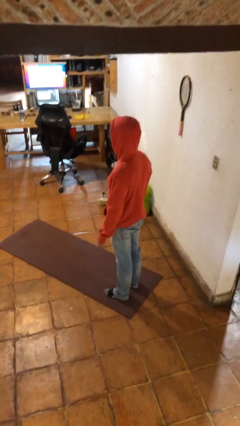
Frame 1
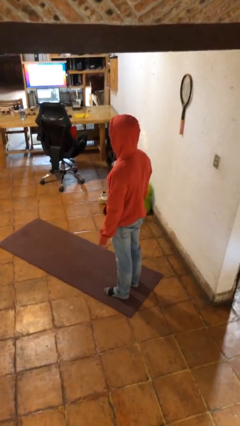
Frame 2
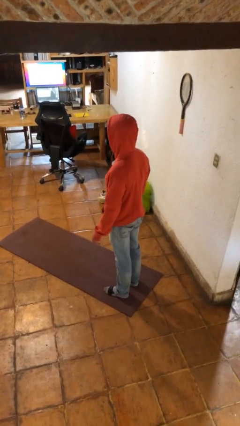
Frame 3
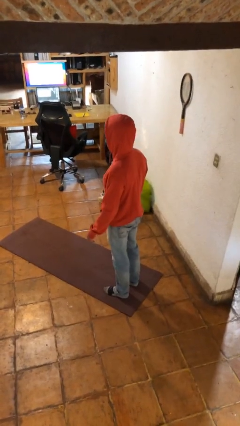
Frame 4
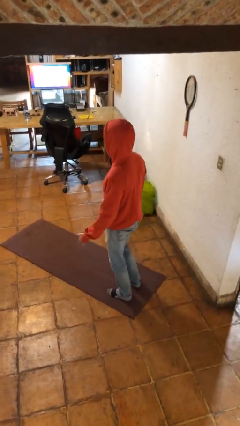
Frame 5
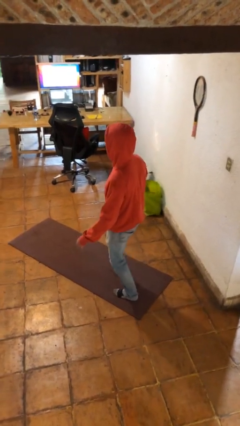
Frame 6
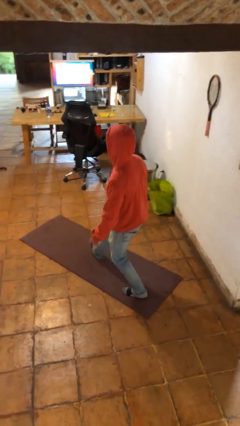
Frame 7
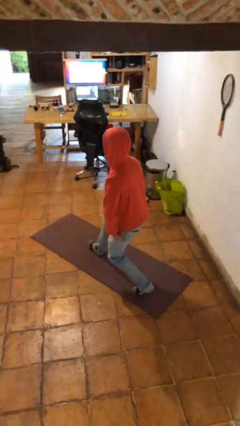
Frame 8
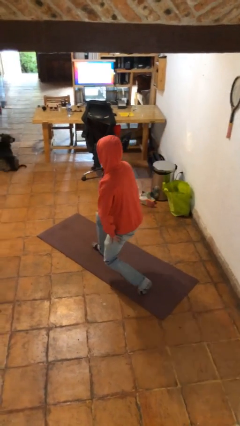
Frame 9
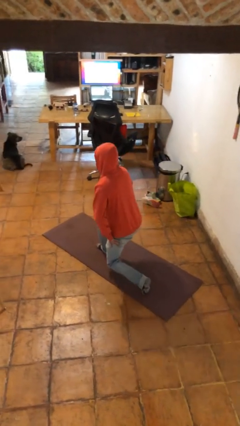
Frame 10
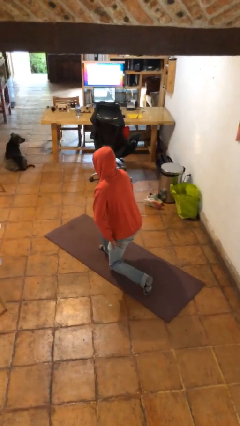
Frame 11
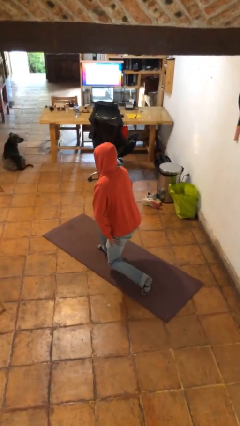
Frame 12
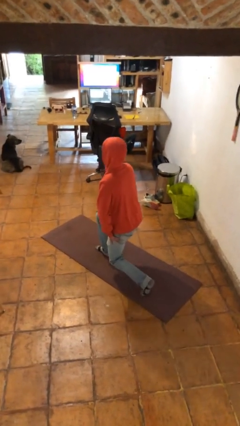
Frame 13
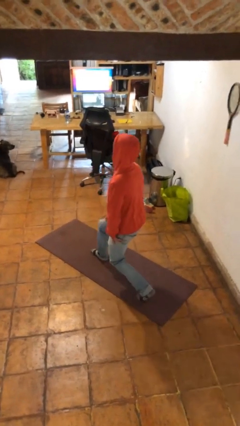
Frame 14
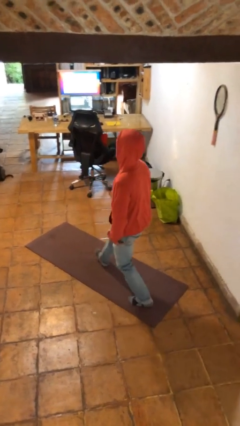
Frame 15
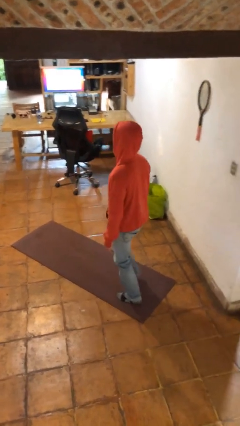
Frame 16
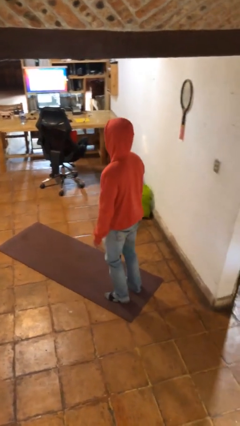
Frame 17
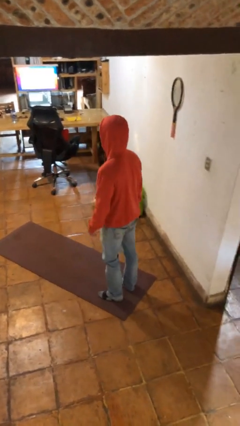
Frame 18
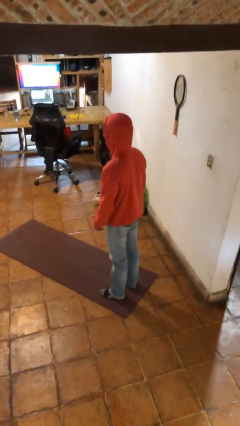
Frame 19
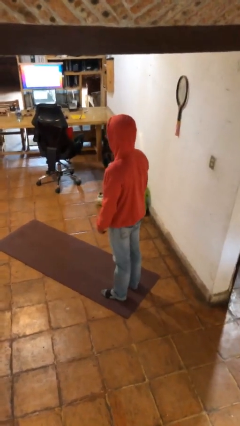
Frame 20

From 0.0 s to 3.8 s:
person exercises with lunges

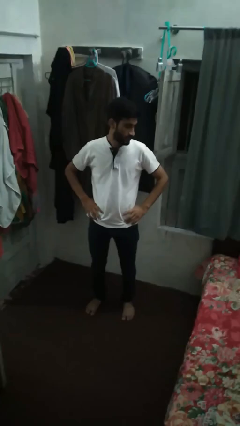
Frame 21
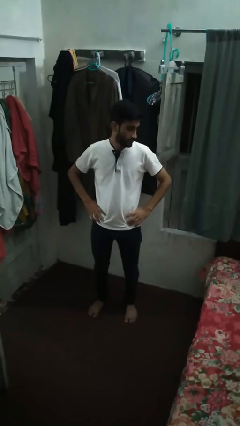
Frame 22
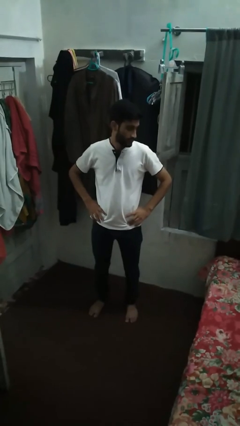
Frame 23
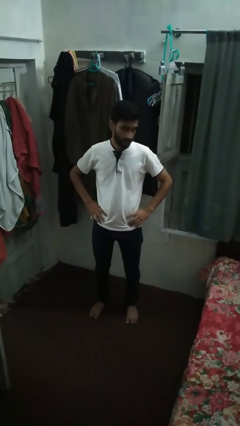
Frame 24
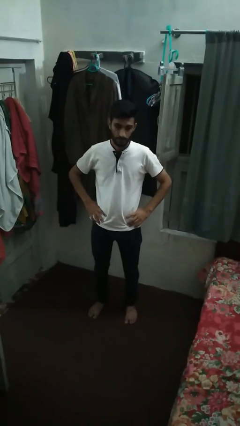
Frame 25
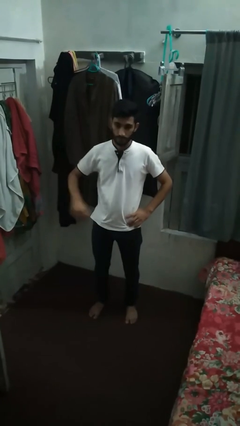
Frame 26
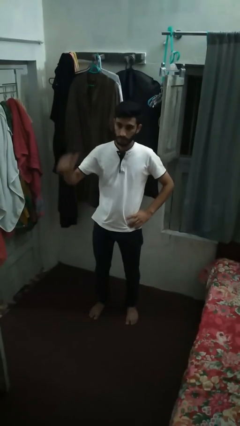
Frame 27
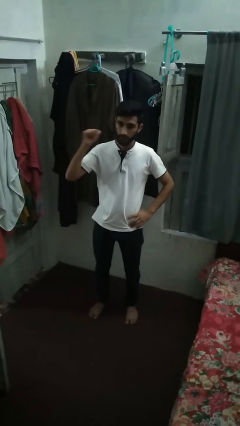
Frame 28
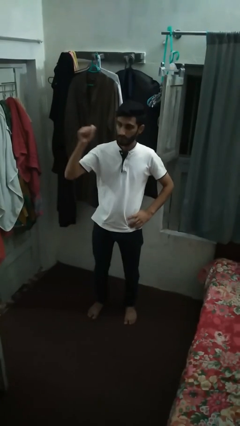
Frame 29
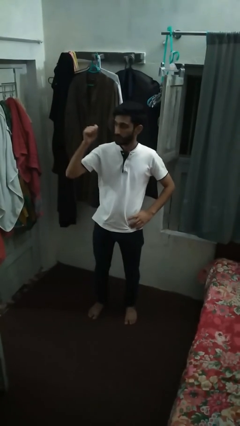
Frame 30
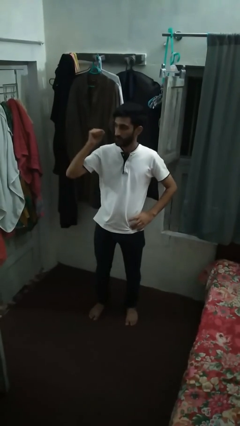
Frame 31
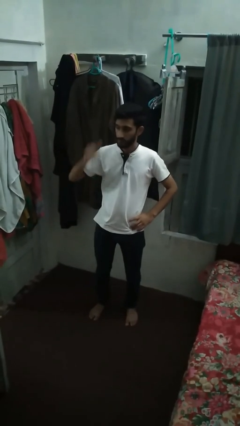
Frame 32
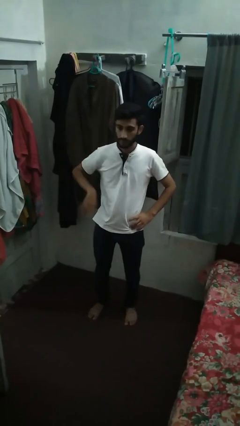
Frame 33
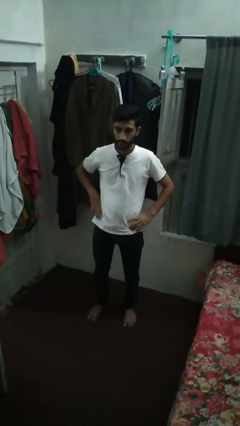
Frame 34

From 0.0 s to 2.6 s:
person gestures behind me

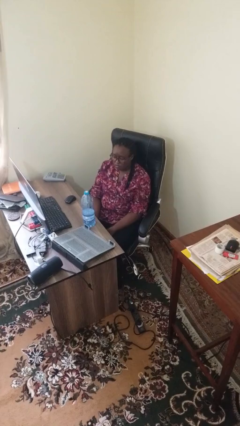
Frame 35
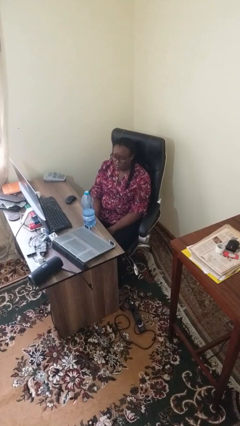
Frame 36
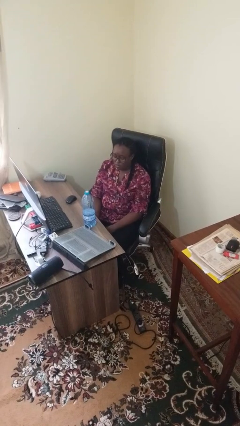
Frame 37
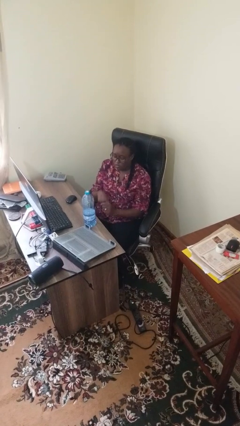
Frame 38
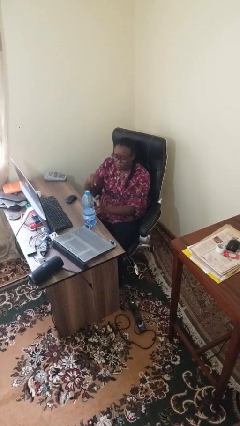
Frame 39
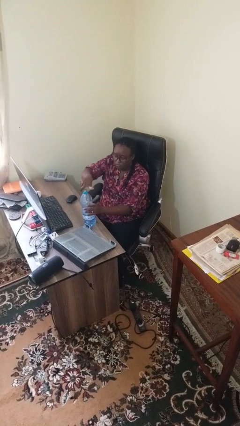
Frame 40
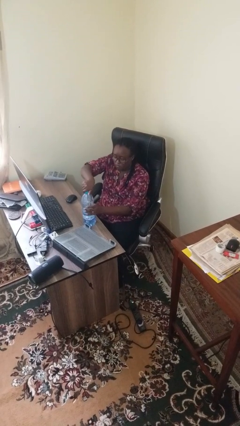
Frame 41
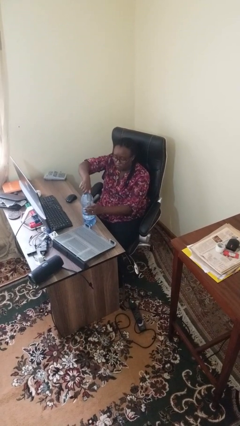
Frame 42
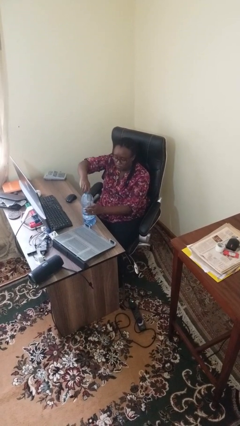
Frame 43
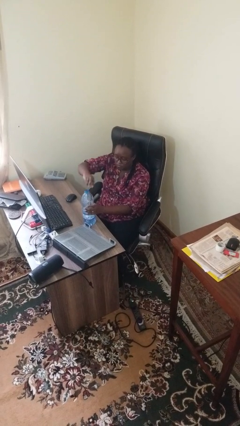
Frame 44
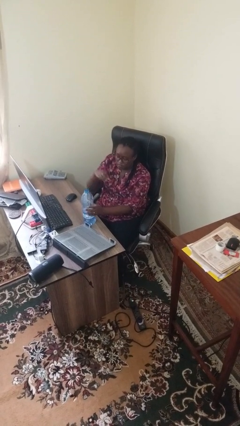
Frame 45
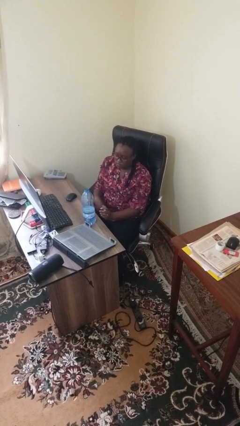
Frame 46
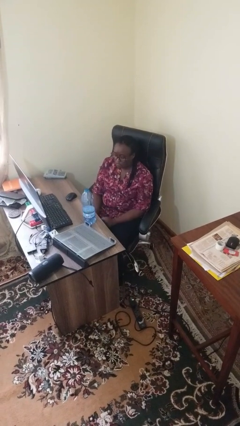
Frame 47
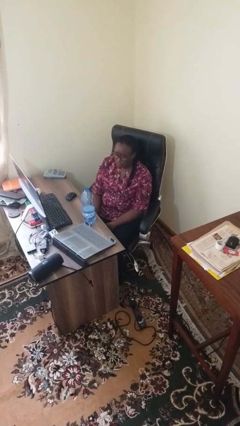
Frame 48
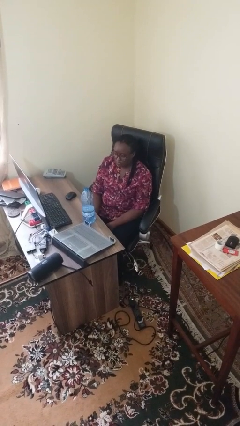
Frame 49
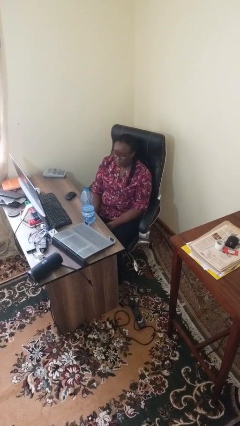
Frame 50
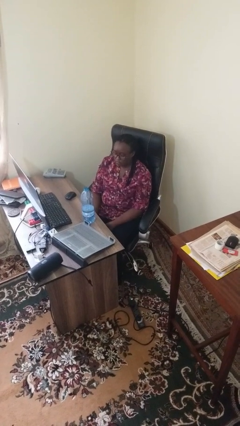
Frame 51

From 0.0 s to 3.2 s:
person unscrews lid from bottle

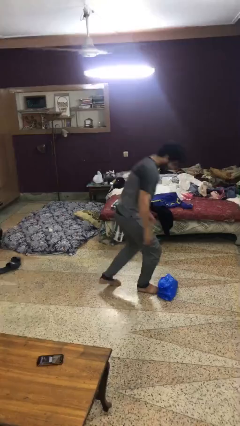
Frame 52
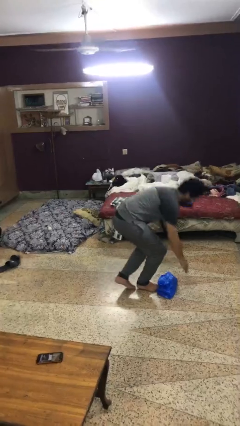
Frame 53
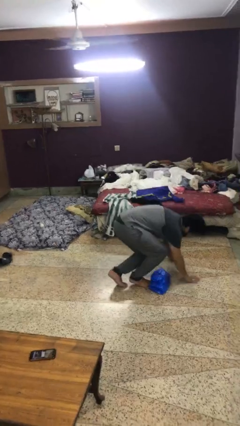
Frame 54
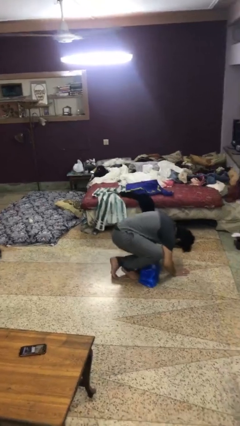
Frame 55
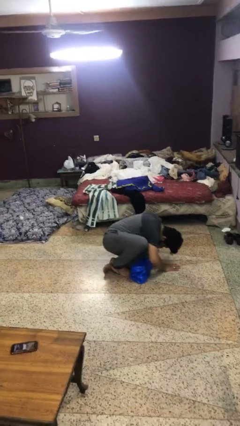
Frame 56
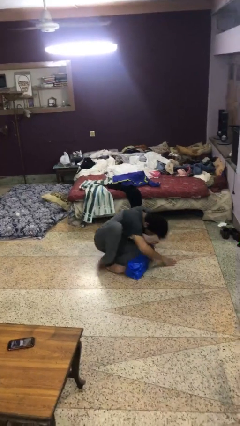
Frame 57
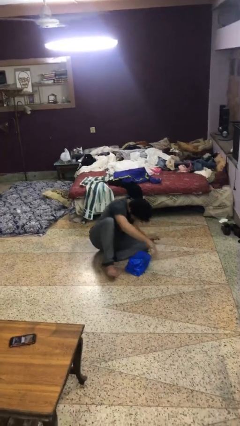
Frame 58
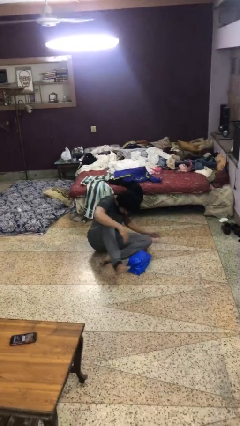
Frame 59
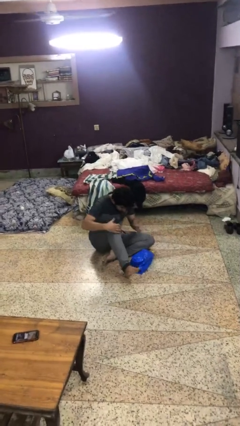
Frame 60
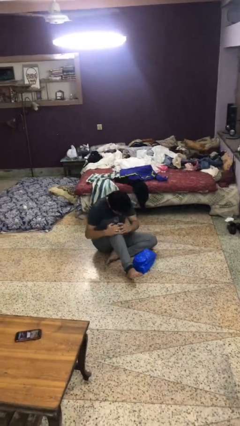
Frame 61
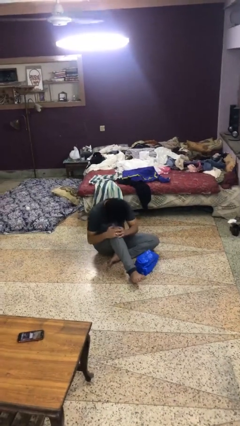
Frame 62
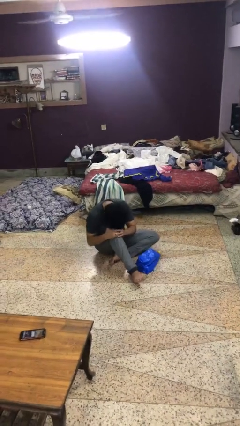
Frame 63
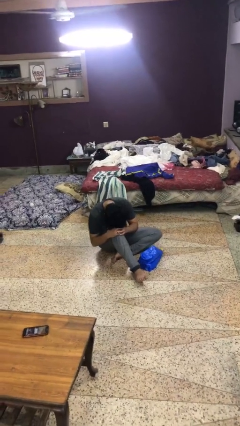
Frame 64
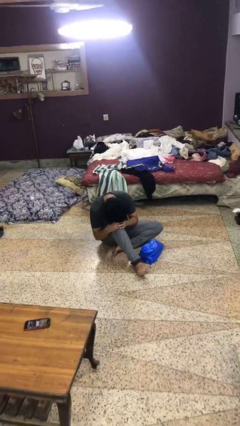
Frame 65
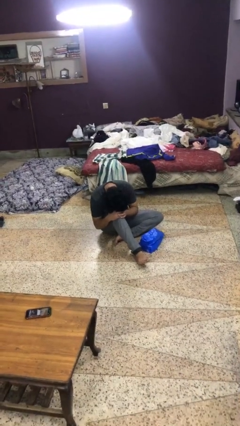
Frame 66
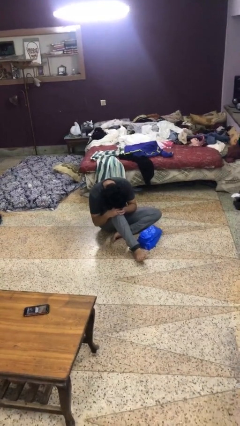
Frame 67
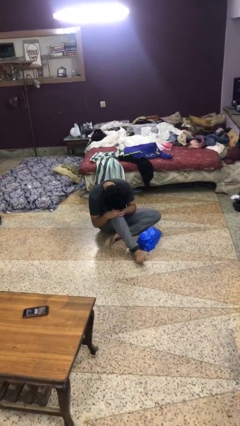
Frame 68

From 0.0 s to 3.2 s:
person lies down on floor

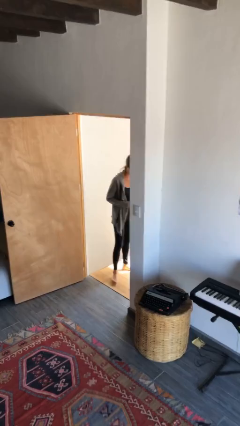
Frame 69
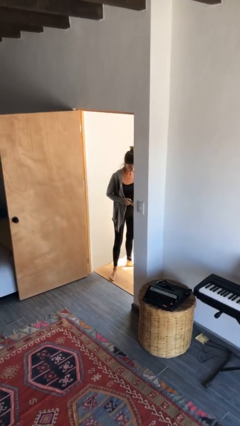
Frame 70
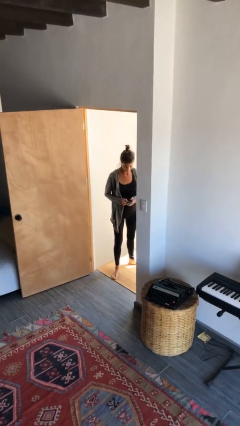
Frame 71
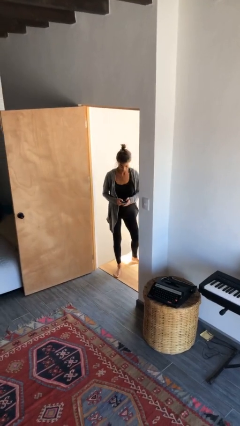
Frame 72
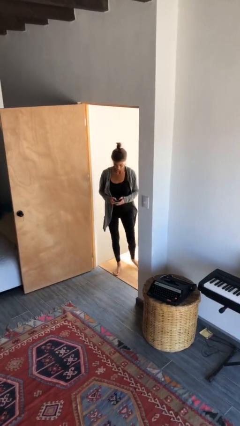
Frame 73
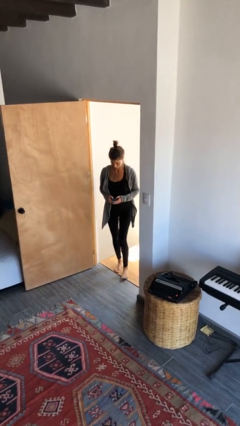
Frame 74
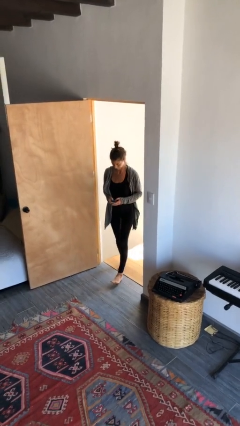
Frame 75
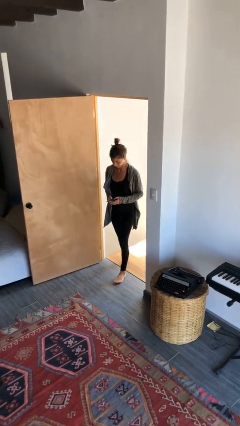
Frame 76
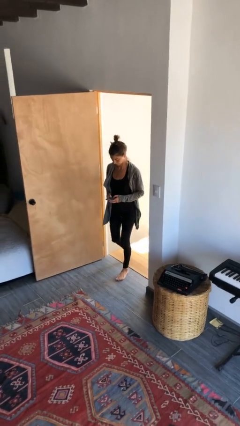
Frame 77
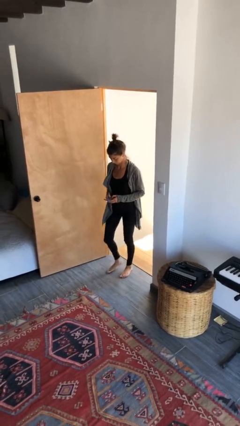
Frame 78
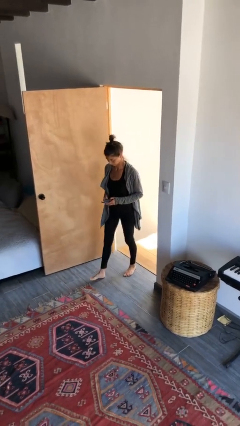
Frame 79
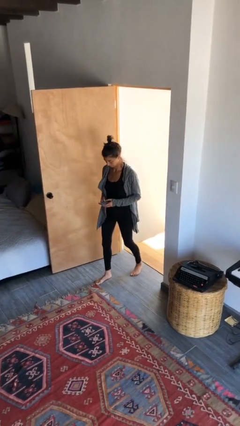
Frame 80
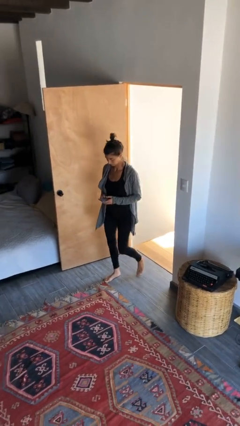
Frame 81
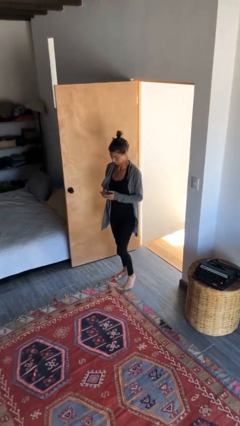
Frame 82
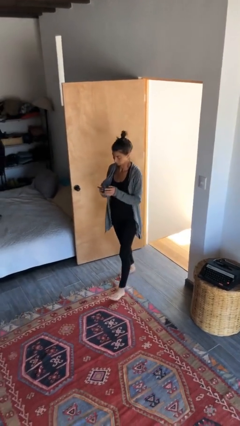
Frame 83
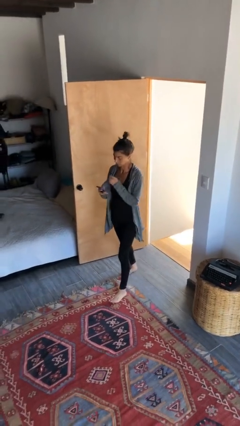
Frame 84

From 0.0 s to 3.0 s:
person enters scene through structure

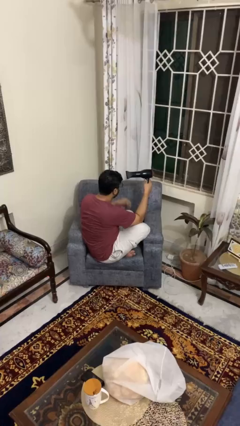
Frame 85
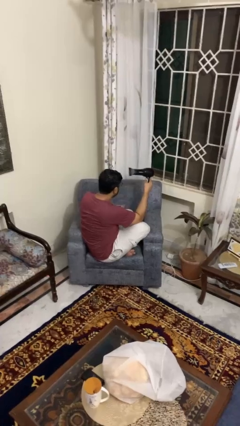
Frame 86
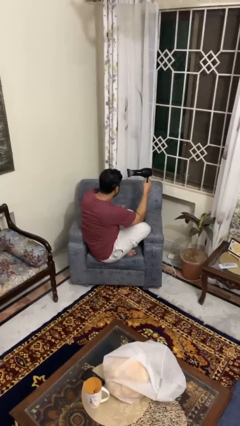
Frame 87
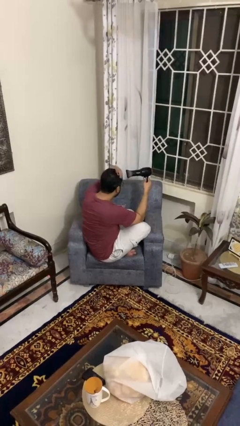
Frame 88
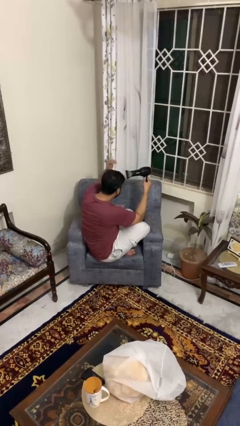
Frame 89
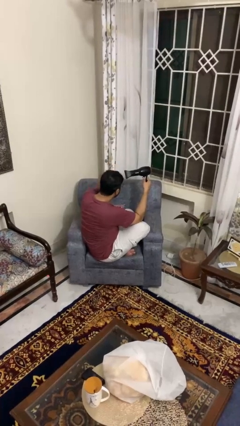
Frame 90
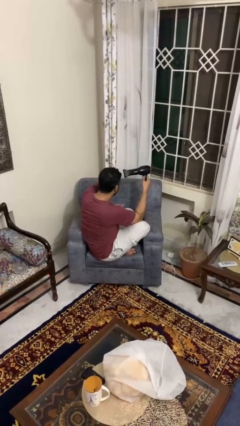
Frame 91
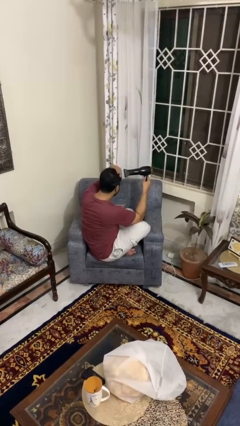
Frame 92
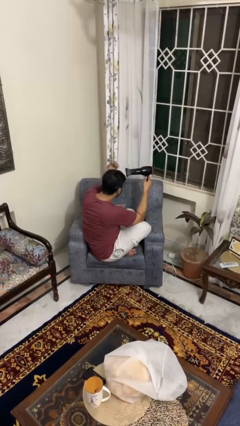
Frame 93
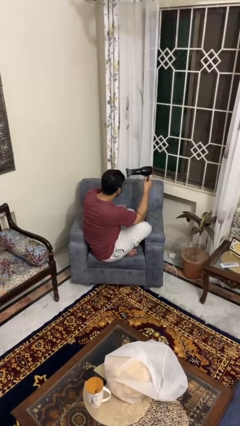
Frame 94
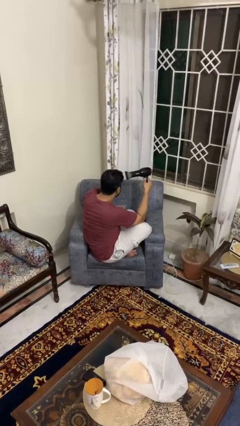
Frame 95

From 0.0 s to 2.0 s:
person dries hair with hairdryer
